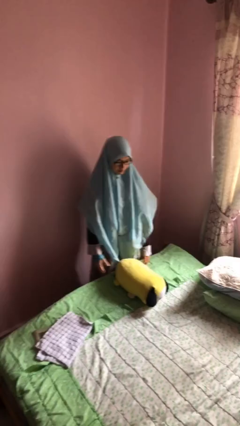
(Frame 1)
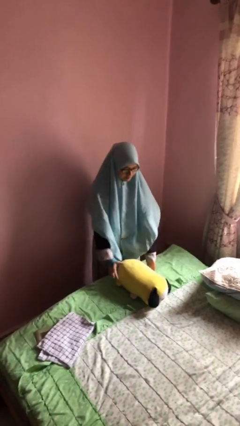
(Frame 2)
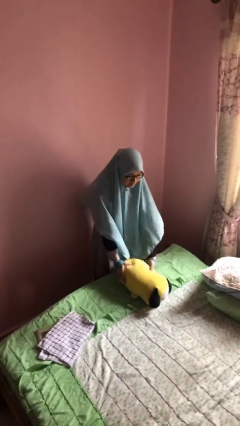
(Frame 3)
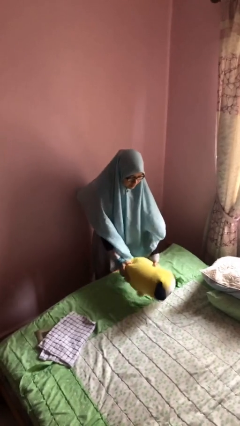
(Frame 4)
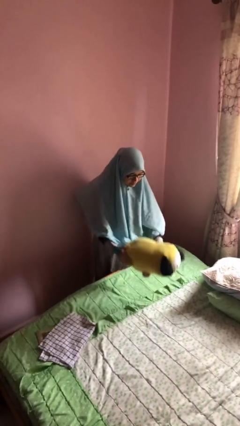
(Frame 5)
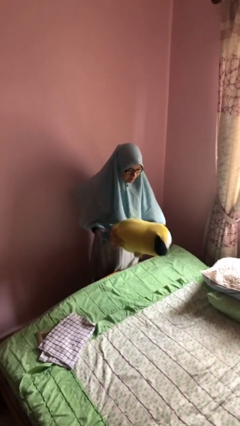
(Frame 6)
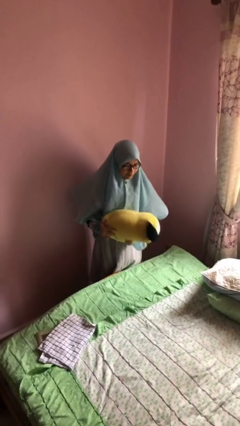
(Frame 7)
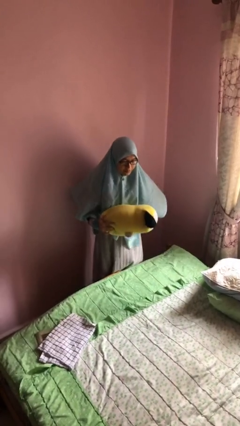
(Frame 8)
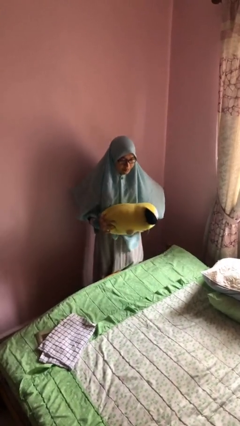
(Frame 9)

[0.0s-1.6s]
person picks up object from bed

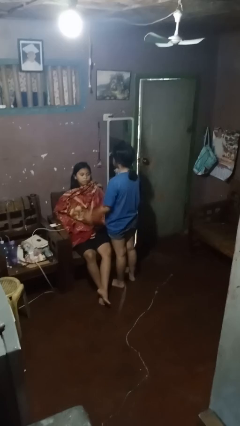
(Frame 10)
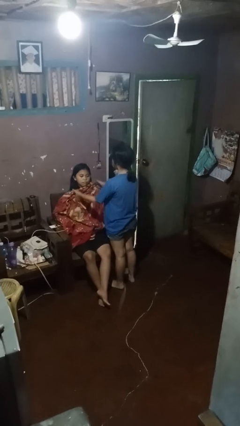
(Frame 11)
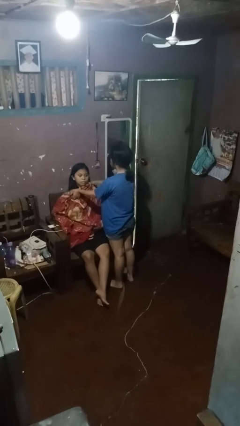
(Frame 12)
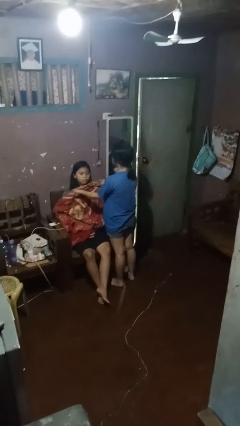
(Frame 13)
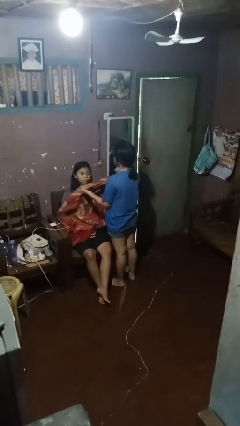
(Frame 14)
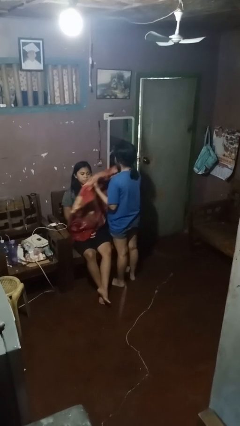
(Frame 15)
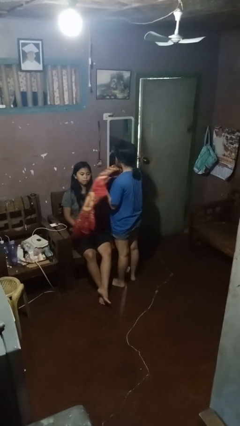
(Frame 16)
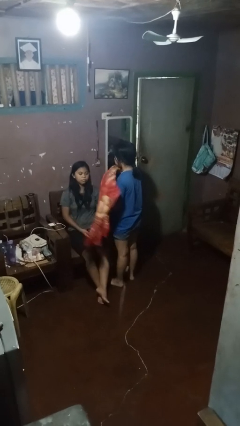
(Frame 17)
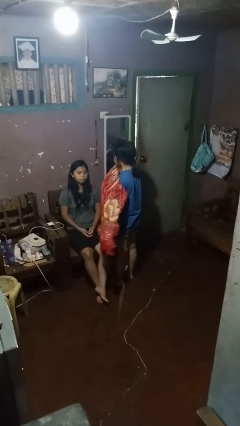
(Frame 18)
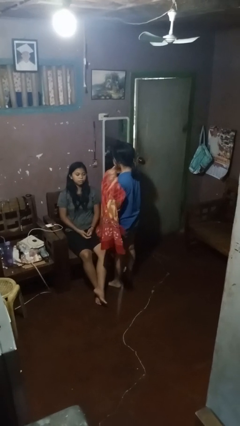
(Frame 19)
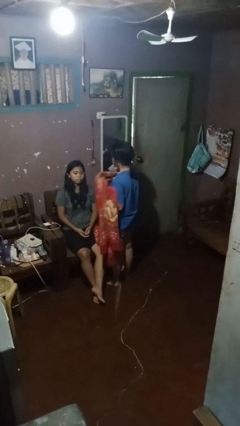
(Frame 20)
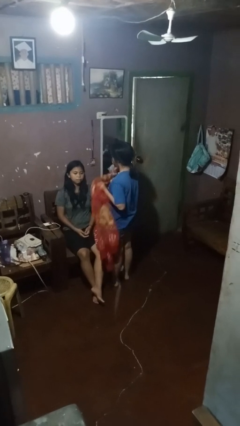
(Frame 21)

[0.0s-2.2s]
person uncovers friend with blanket

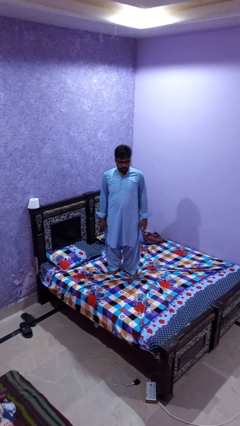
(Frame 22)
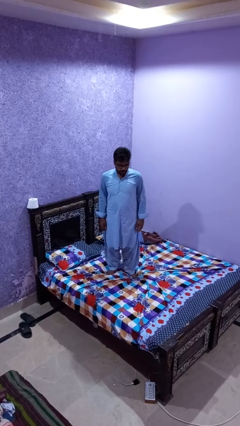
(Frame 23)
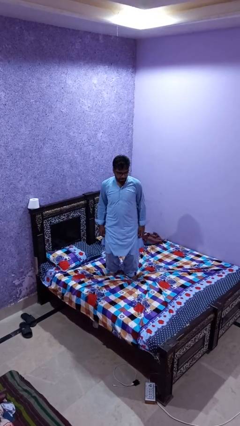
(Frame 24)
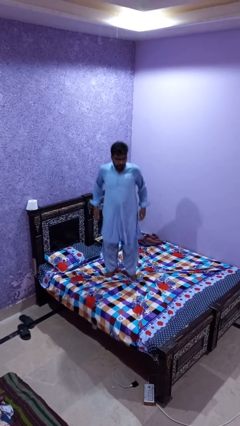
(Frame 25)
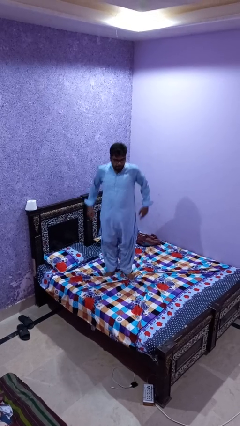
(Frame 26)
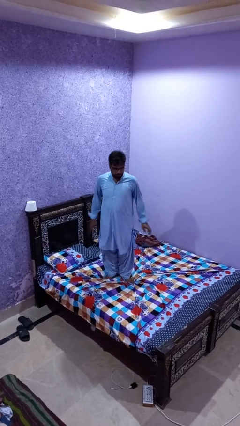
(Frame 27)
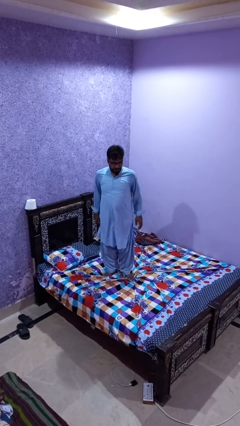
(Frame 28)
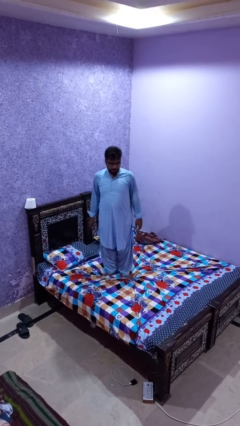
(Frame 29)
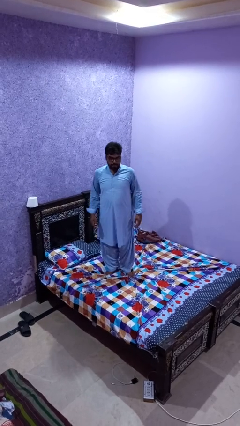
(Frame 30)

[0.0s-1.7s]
person jumps on bed

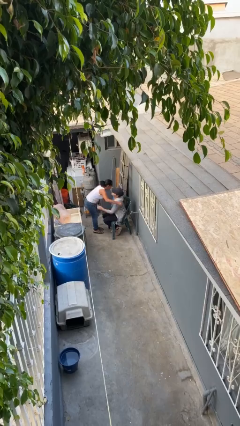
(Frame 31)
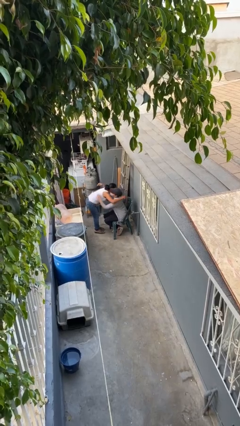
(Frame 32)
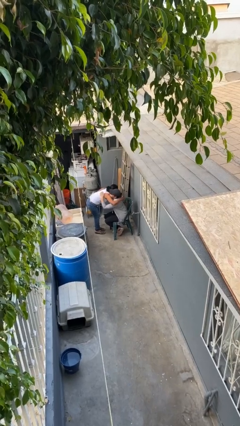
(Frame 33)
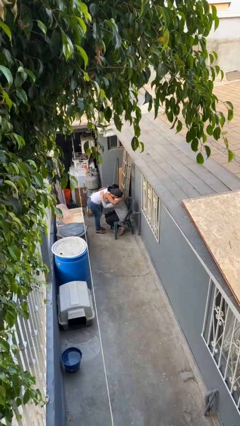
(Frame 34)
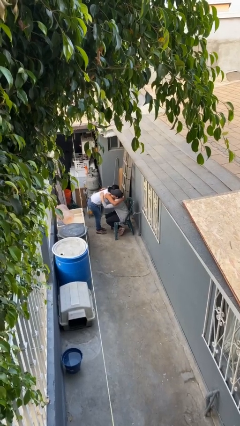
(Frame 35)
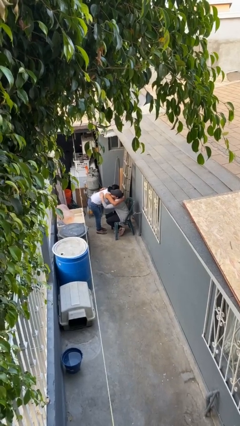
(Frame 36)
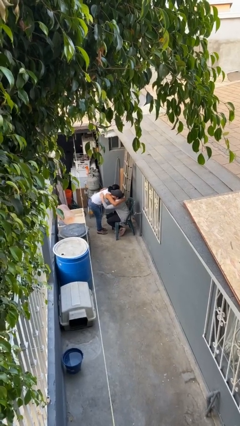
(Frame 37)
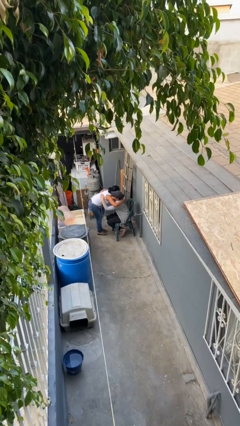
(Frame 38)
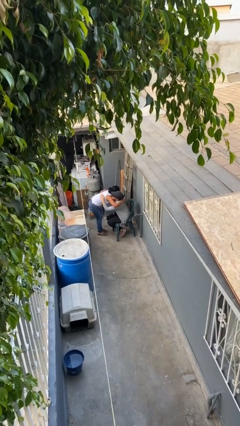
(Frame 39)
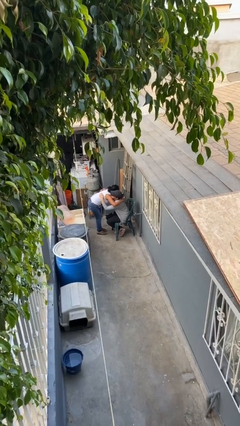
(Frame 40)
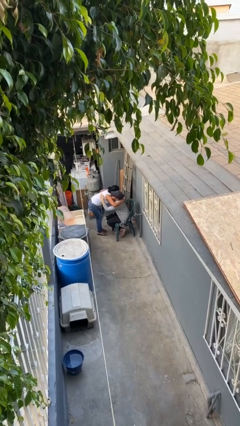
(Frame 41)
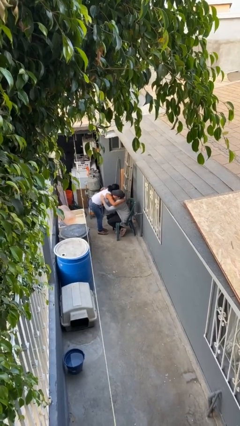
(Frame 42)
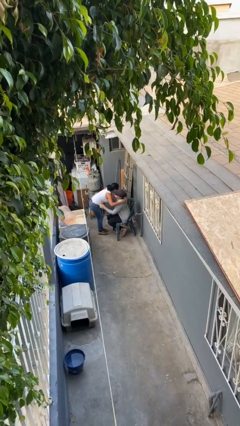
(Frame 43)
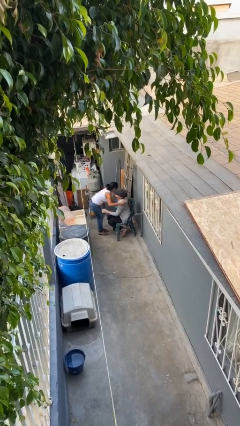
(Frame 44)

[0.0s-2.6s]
person embraces person

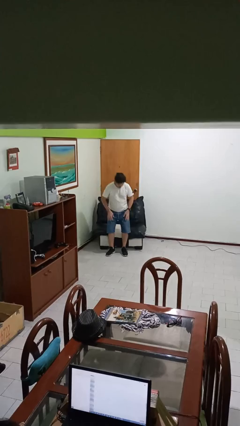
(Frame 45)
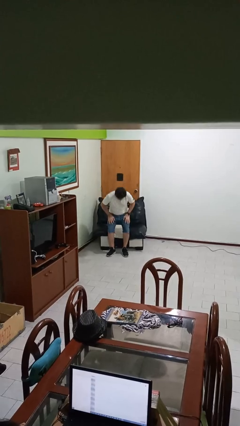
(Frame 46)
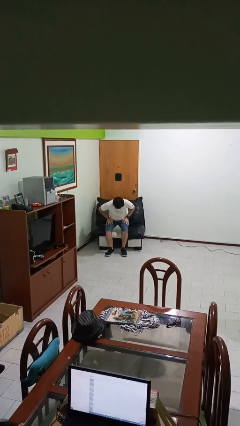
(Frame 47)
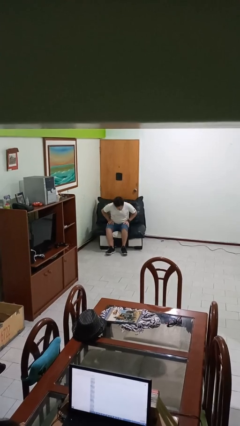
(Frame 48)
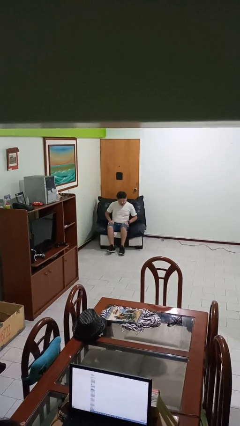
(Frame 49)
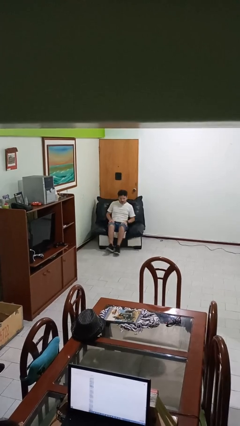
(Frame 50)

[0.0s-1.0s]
person lies down on couch

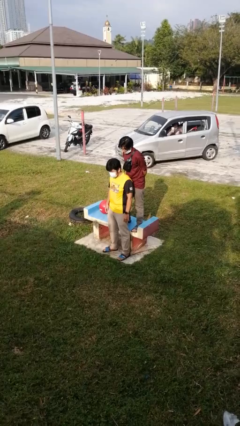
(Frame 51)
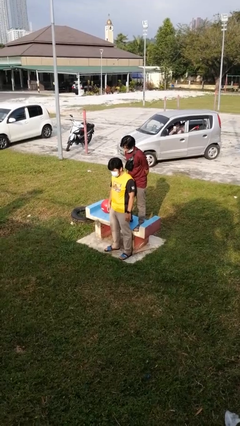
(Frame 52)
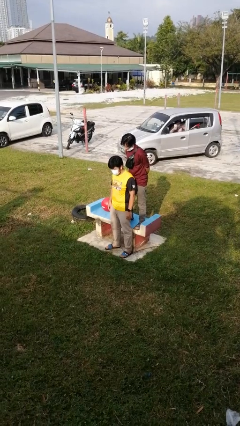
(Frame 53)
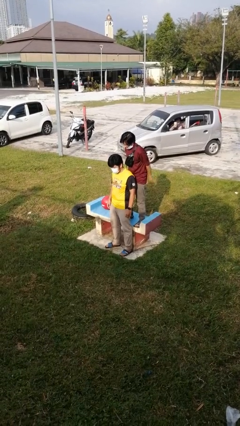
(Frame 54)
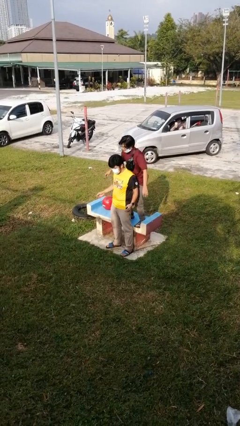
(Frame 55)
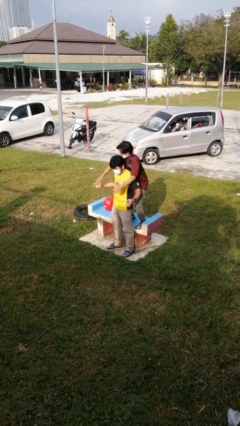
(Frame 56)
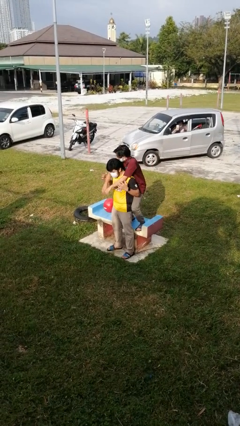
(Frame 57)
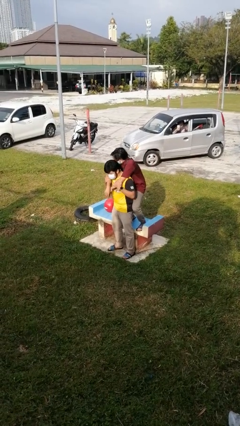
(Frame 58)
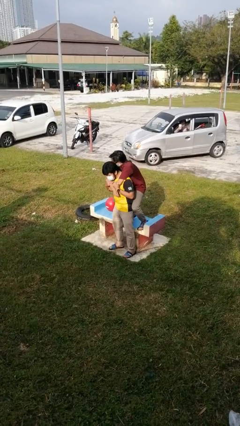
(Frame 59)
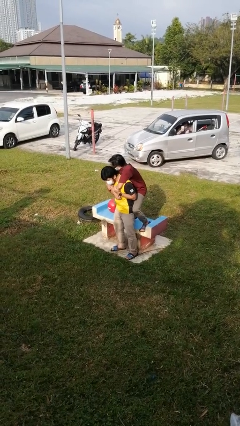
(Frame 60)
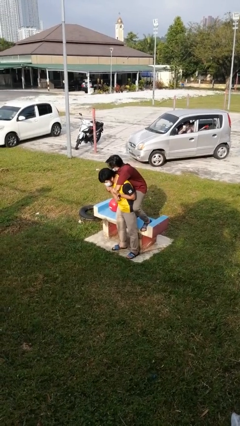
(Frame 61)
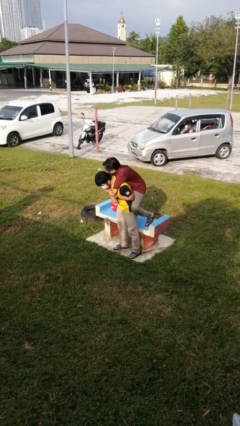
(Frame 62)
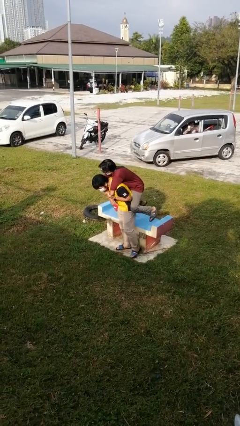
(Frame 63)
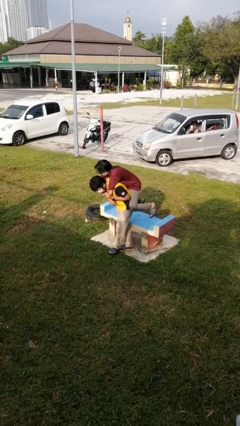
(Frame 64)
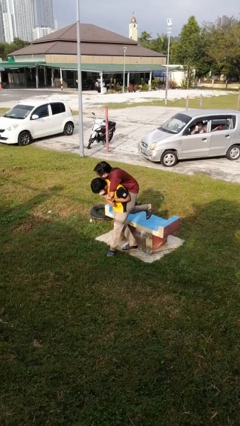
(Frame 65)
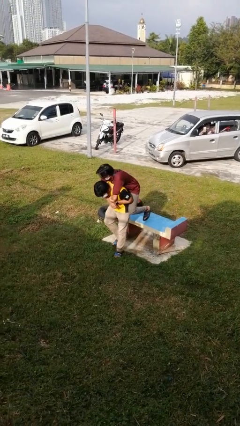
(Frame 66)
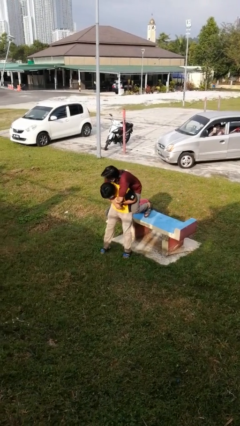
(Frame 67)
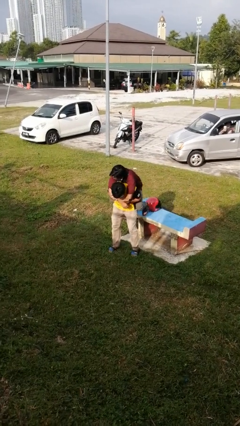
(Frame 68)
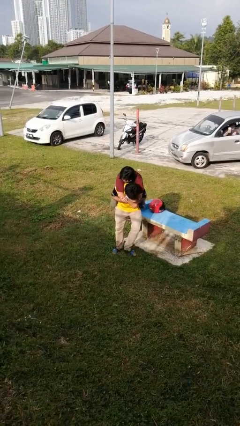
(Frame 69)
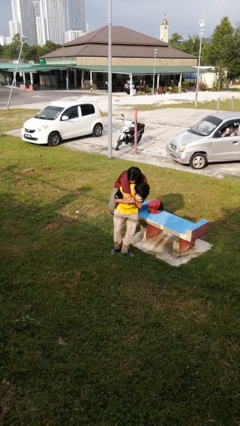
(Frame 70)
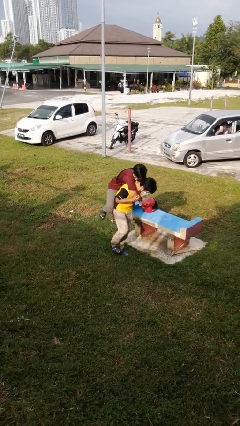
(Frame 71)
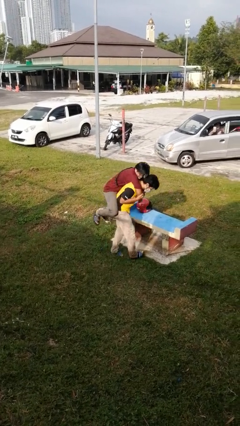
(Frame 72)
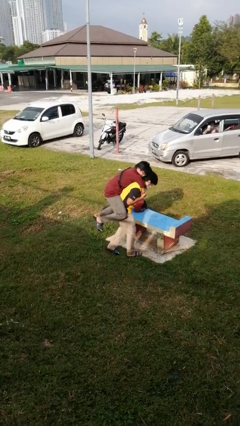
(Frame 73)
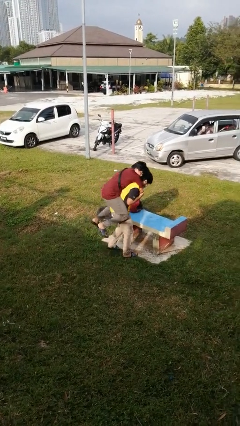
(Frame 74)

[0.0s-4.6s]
person carries person over shoulder

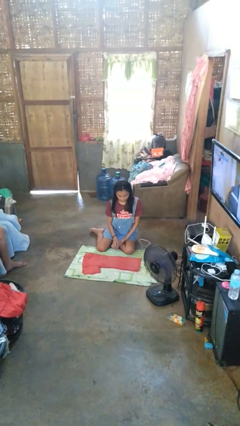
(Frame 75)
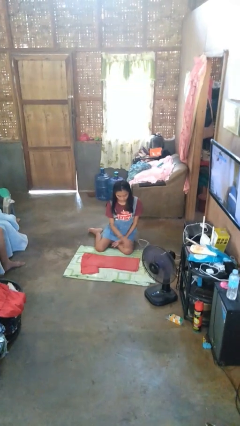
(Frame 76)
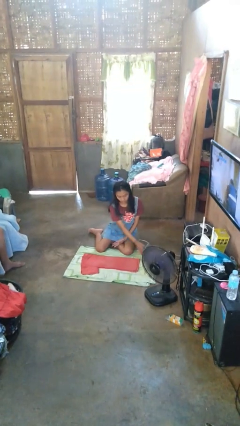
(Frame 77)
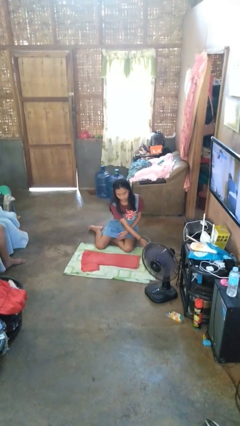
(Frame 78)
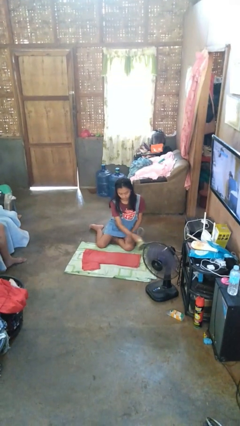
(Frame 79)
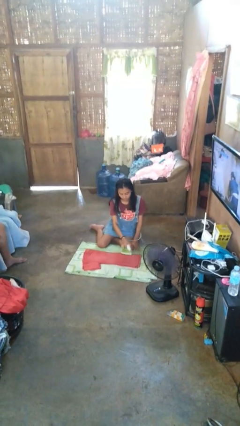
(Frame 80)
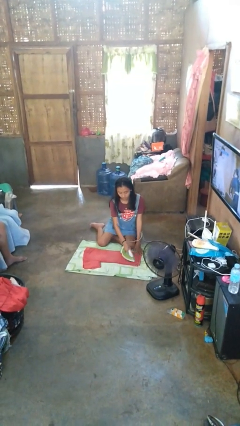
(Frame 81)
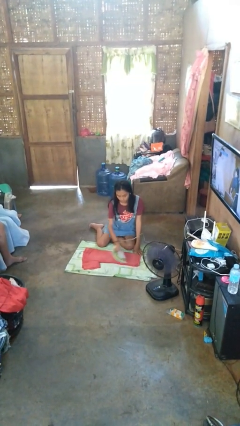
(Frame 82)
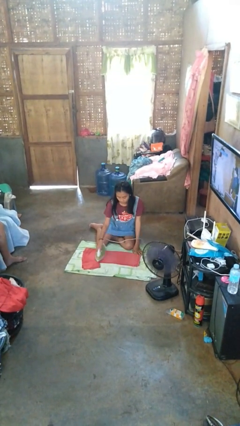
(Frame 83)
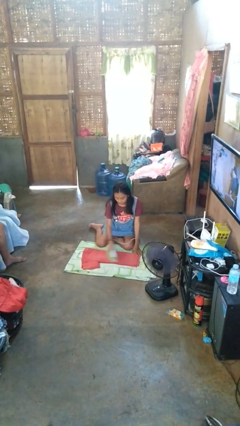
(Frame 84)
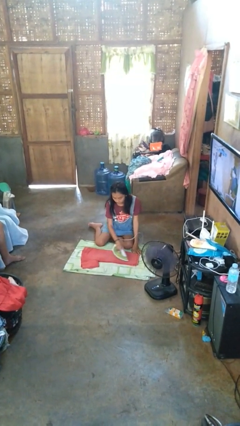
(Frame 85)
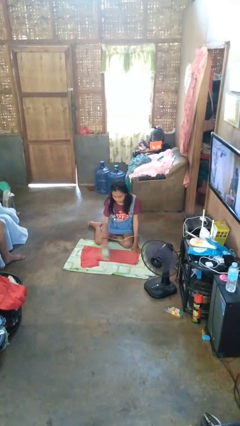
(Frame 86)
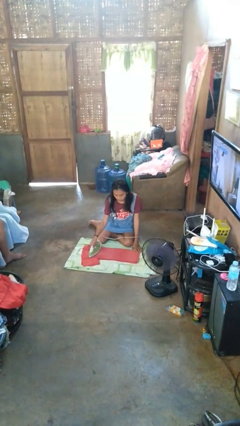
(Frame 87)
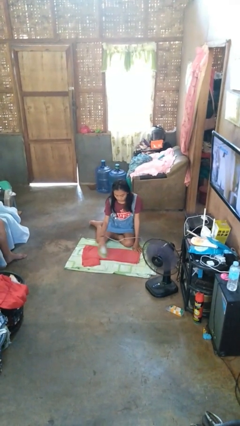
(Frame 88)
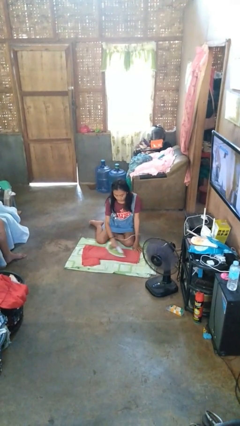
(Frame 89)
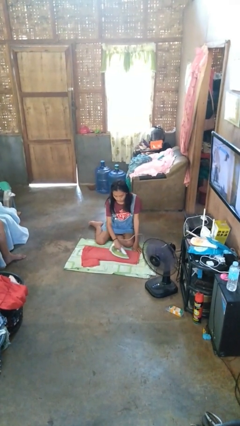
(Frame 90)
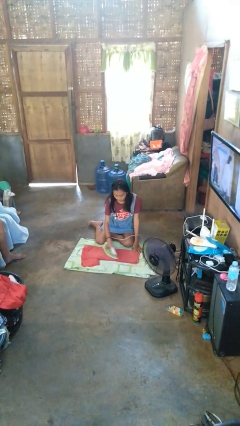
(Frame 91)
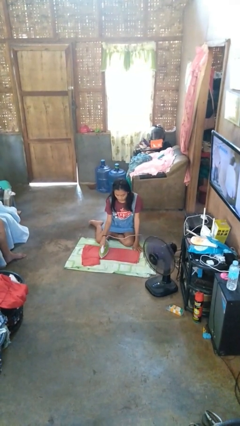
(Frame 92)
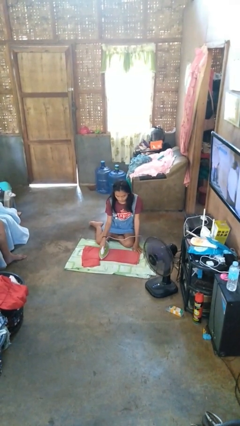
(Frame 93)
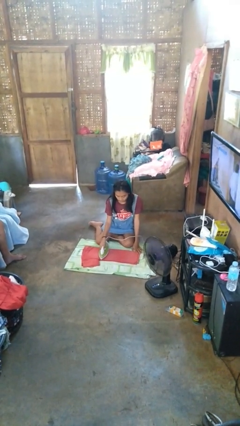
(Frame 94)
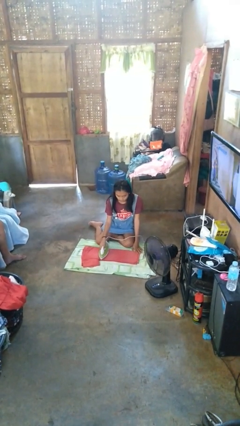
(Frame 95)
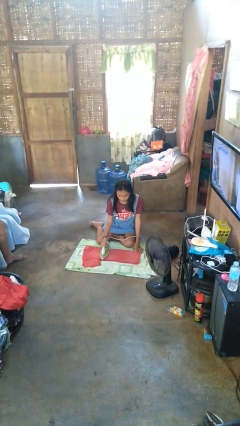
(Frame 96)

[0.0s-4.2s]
person irons clothes
